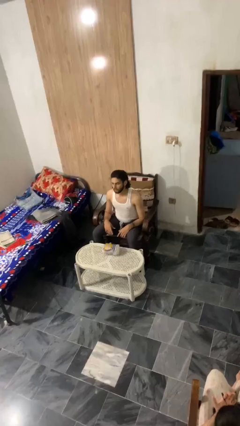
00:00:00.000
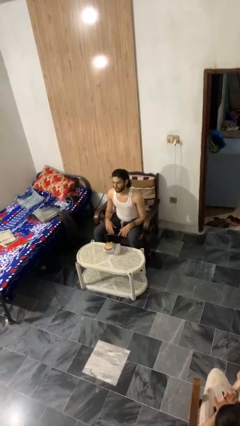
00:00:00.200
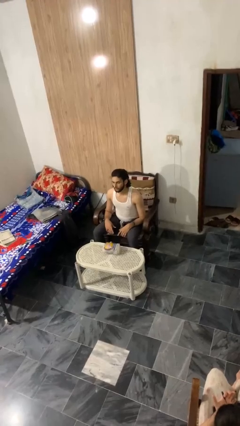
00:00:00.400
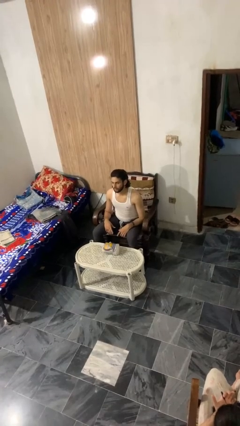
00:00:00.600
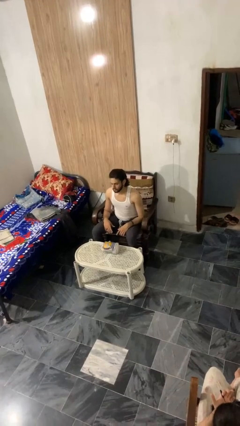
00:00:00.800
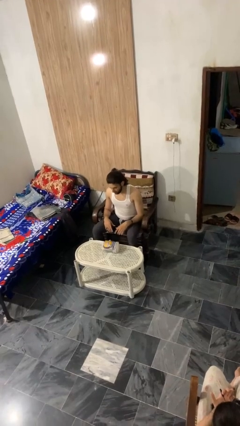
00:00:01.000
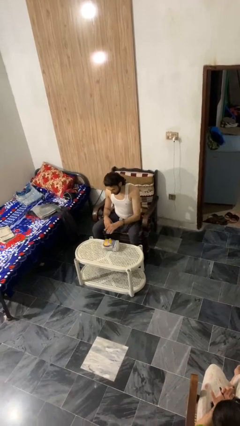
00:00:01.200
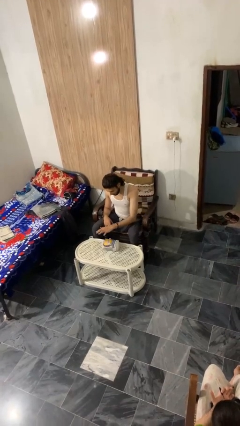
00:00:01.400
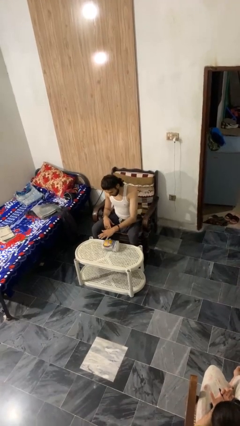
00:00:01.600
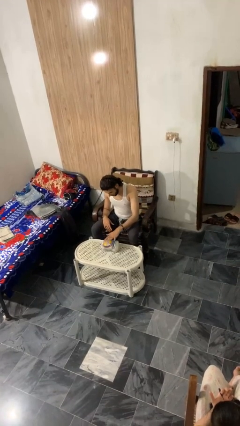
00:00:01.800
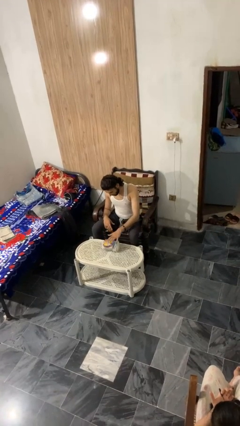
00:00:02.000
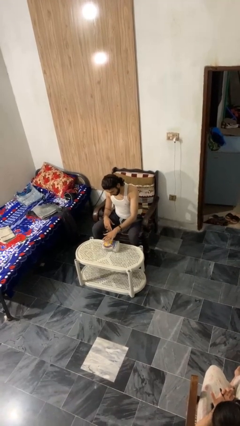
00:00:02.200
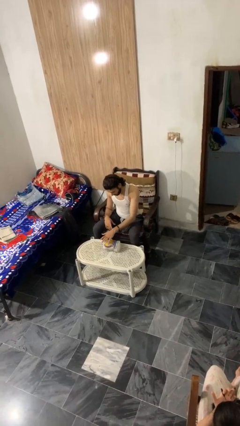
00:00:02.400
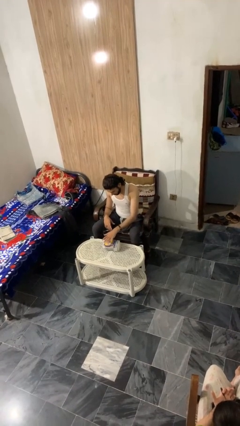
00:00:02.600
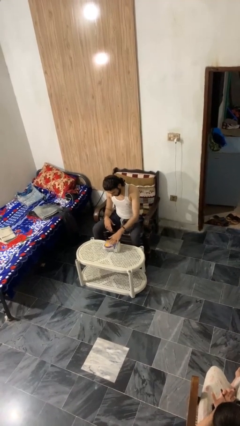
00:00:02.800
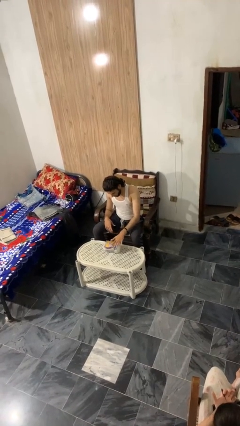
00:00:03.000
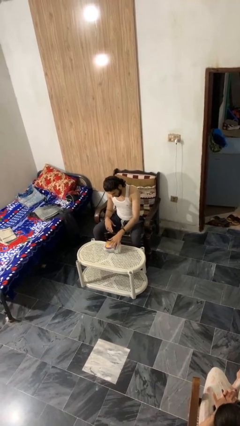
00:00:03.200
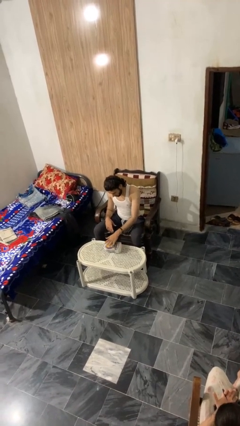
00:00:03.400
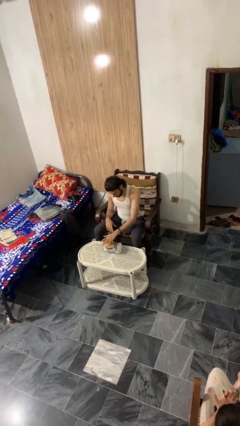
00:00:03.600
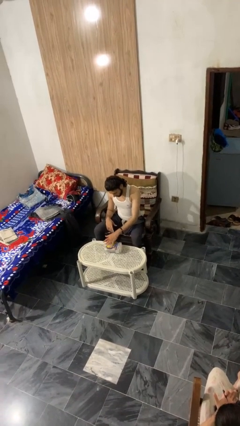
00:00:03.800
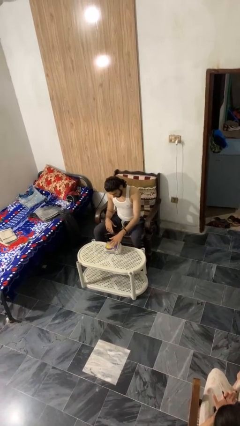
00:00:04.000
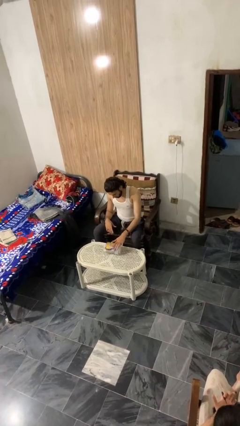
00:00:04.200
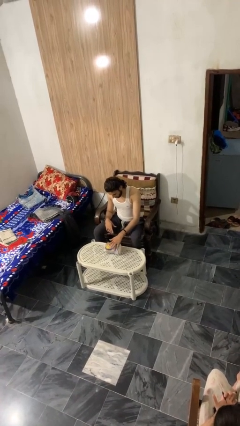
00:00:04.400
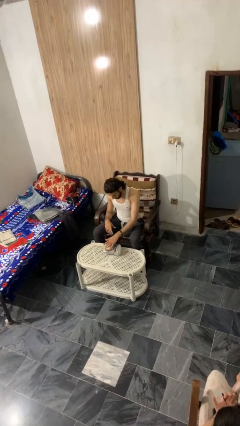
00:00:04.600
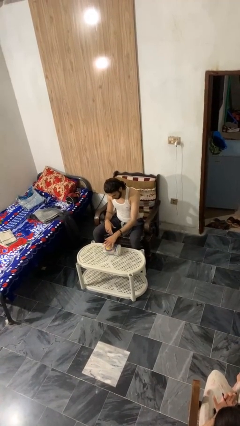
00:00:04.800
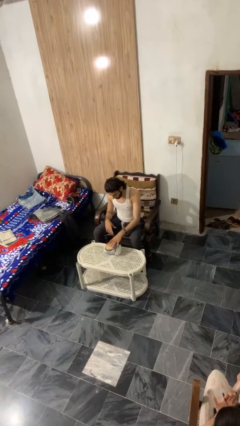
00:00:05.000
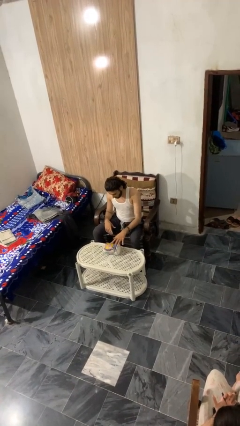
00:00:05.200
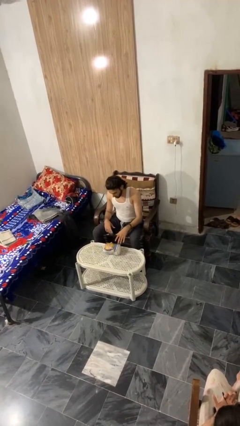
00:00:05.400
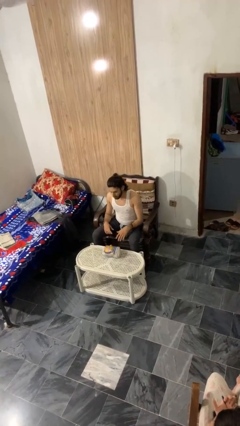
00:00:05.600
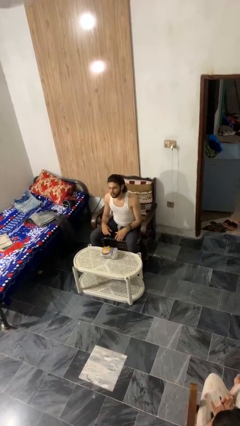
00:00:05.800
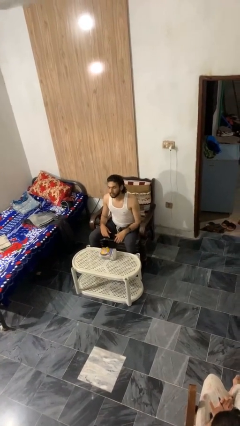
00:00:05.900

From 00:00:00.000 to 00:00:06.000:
person waves hand over object

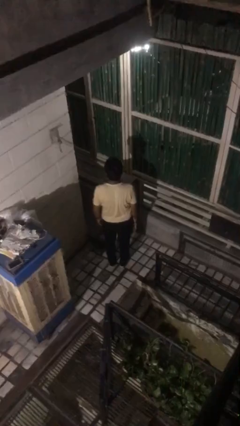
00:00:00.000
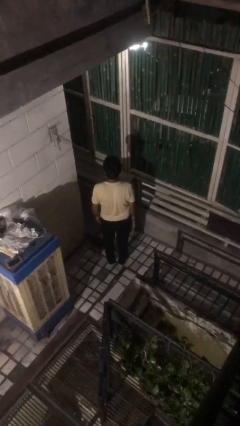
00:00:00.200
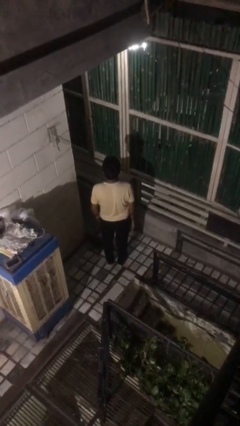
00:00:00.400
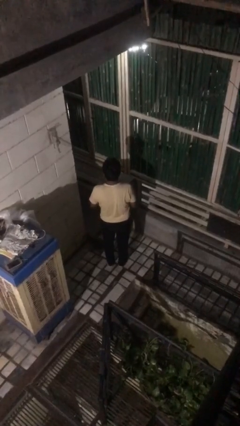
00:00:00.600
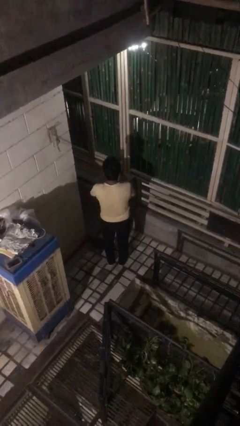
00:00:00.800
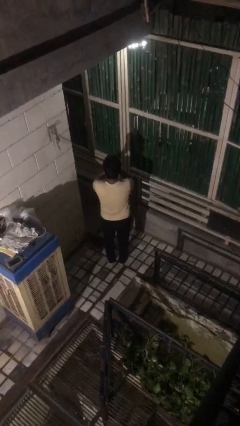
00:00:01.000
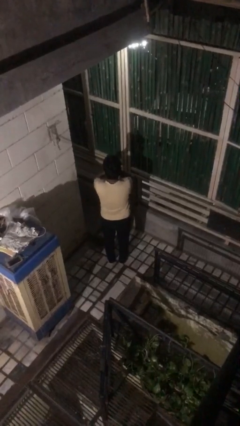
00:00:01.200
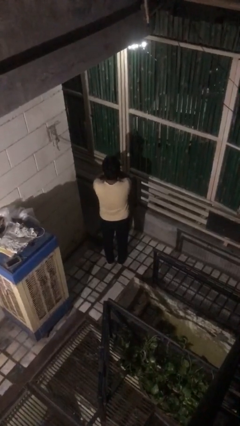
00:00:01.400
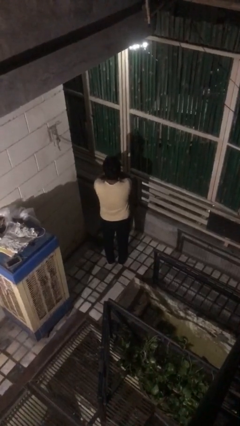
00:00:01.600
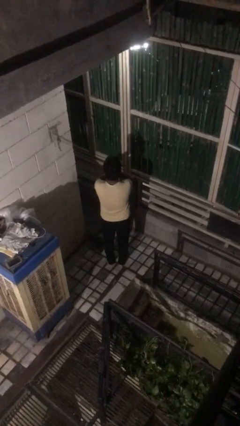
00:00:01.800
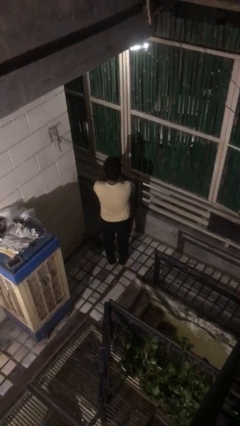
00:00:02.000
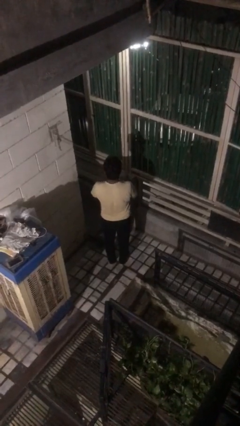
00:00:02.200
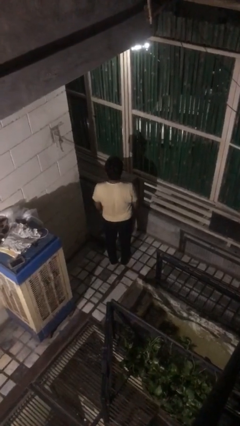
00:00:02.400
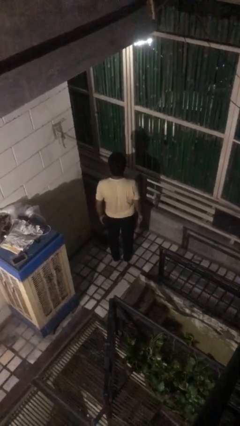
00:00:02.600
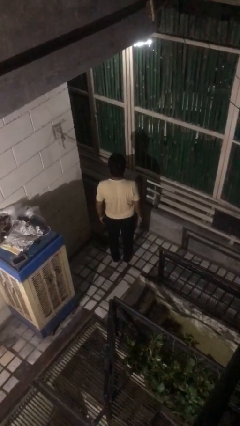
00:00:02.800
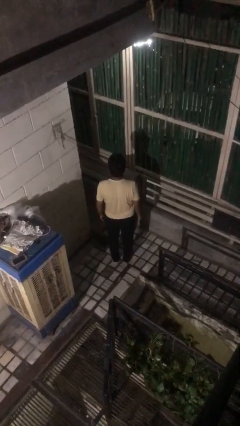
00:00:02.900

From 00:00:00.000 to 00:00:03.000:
person covers face with hands

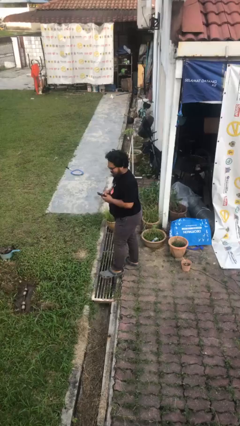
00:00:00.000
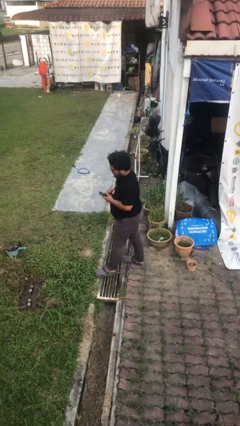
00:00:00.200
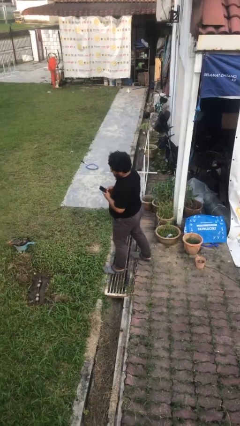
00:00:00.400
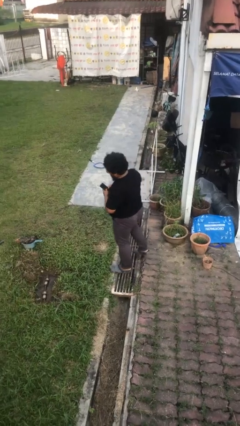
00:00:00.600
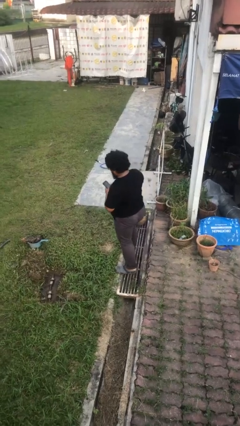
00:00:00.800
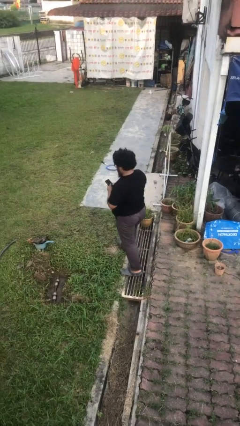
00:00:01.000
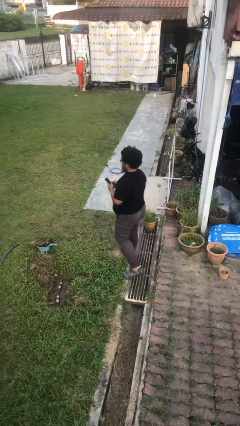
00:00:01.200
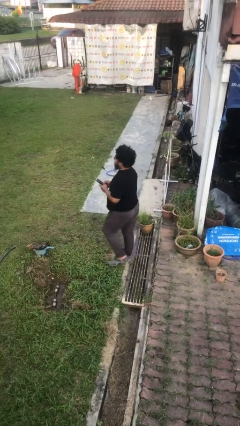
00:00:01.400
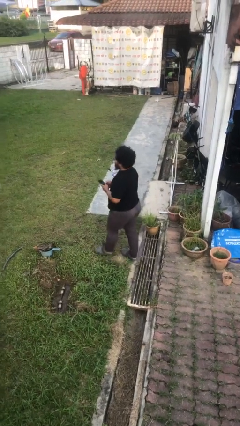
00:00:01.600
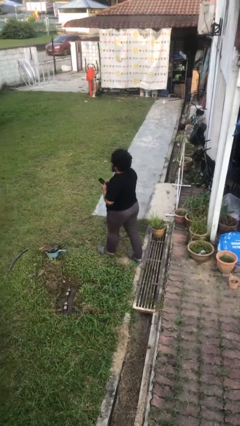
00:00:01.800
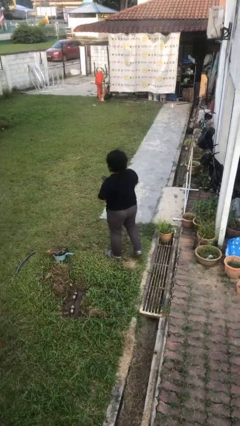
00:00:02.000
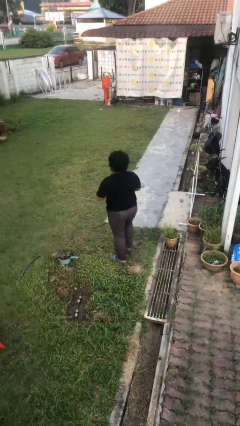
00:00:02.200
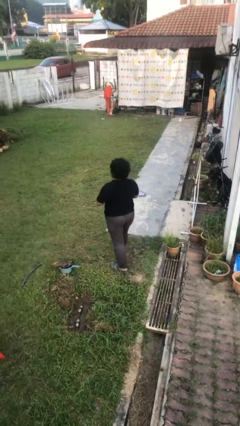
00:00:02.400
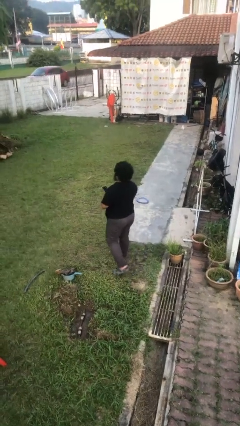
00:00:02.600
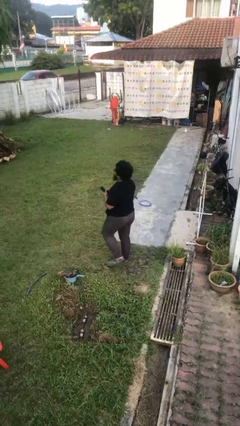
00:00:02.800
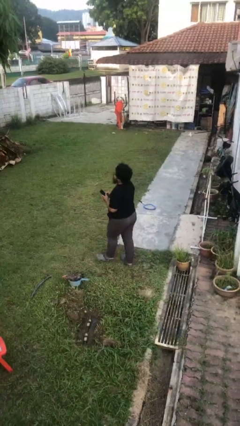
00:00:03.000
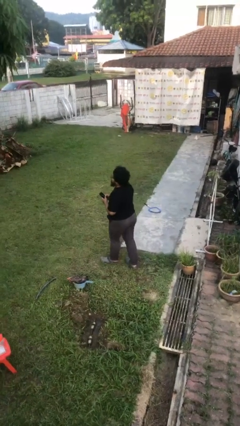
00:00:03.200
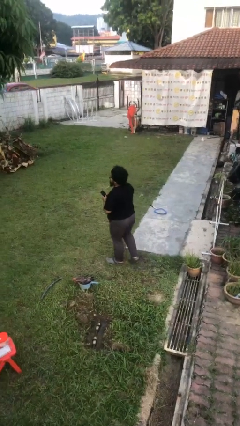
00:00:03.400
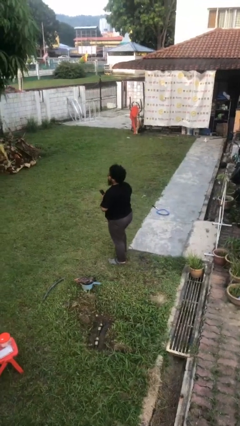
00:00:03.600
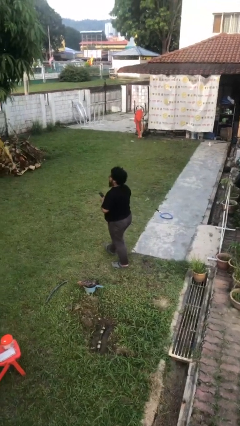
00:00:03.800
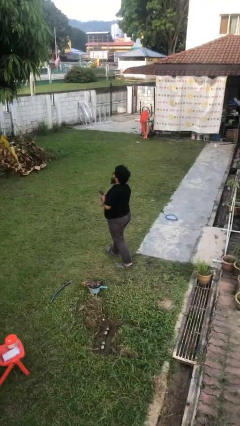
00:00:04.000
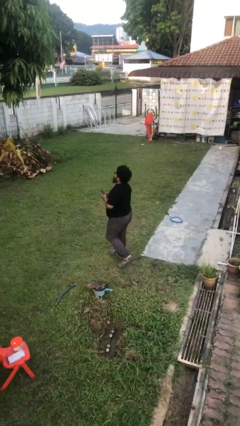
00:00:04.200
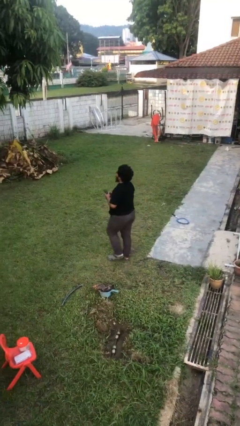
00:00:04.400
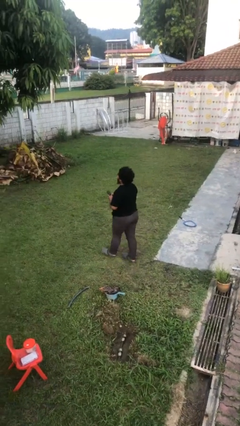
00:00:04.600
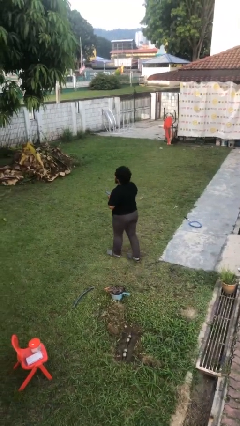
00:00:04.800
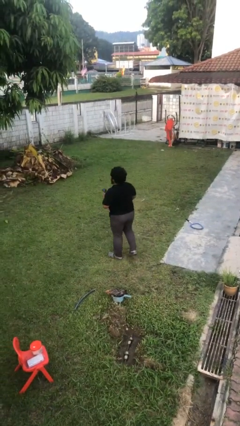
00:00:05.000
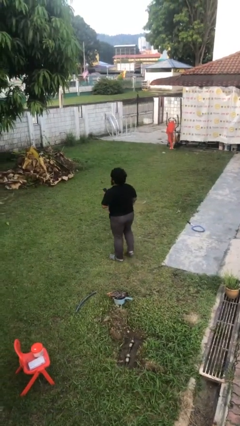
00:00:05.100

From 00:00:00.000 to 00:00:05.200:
person texts on phone

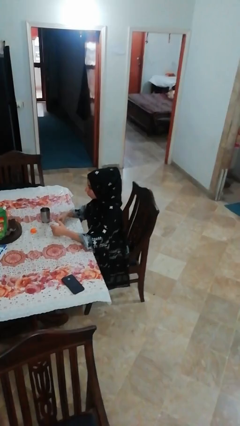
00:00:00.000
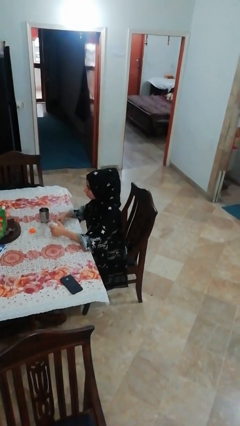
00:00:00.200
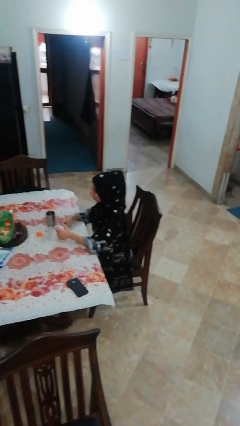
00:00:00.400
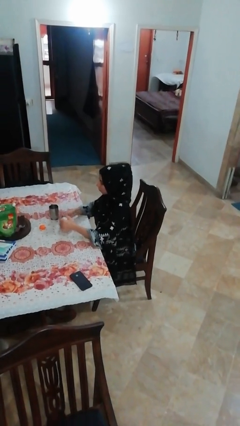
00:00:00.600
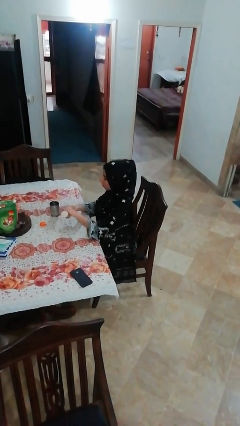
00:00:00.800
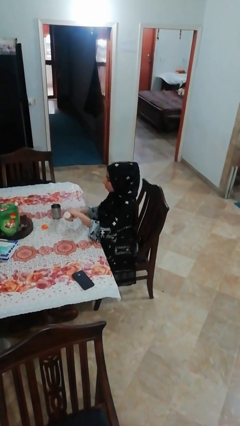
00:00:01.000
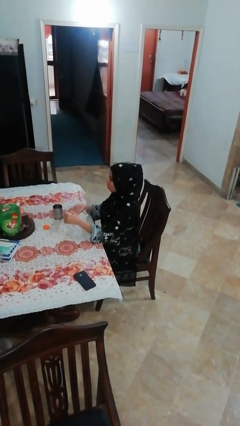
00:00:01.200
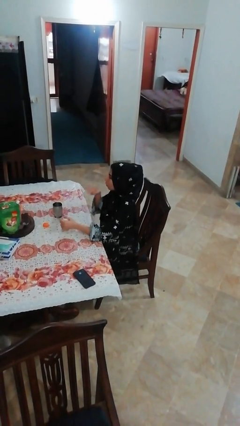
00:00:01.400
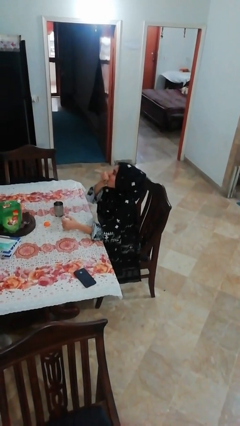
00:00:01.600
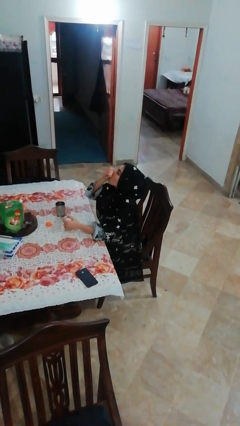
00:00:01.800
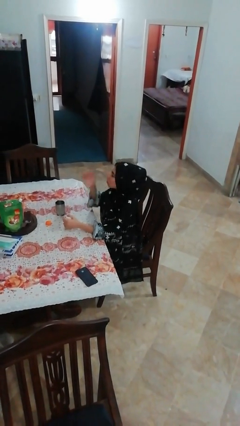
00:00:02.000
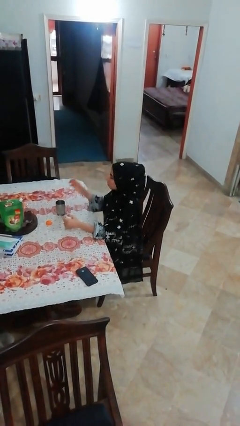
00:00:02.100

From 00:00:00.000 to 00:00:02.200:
person takes medicine pills

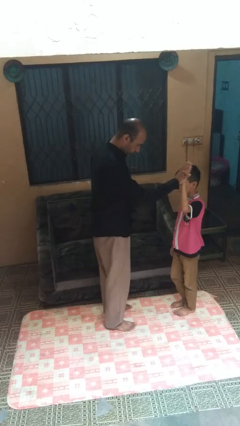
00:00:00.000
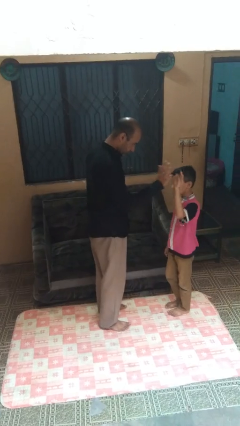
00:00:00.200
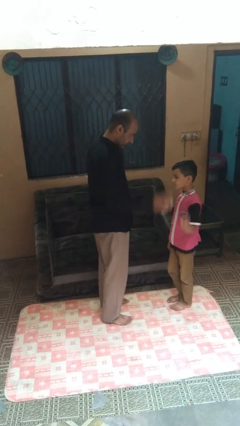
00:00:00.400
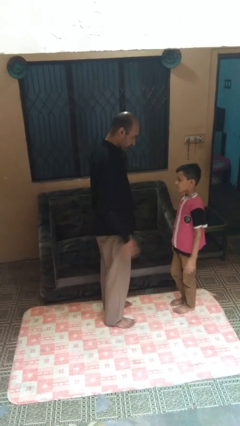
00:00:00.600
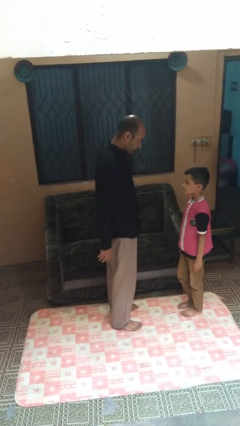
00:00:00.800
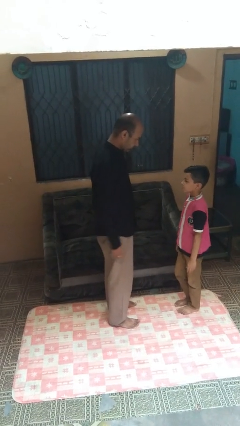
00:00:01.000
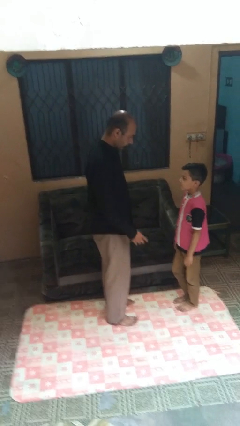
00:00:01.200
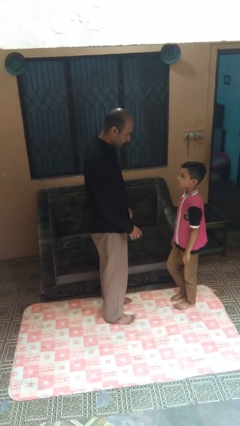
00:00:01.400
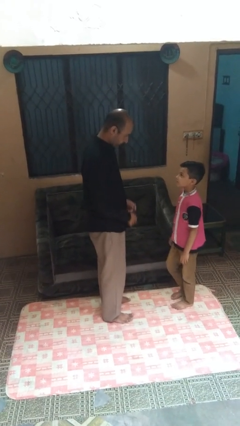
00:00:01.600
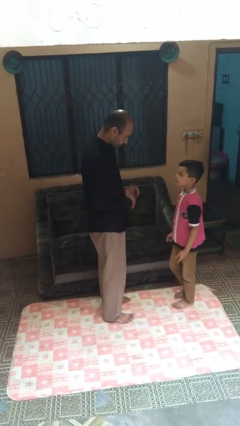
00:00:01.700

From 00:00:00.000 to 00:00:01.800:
person highfives hand
